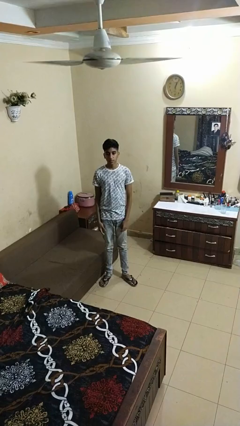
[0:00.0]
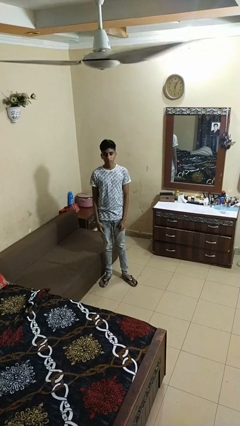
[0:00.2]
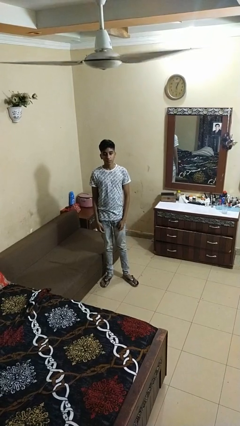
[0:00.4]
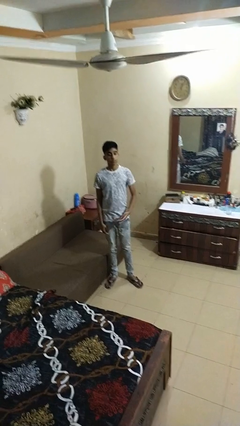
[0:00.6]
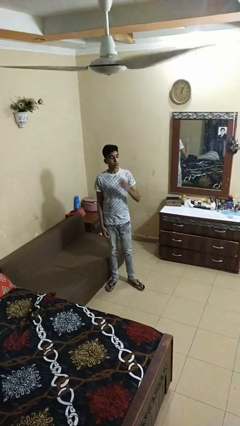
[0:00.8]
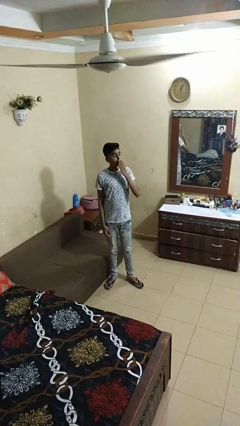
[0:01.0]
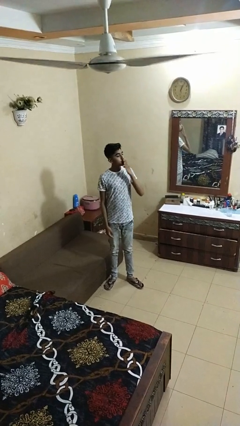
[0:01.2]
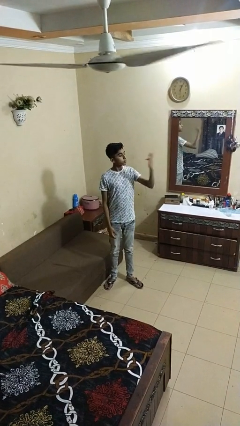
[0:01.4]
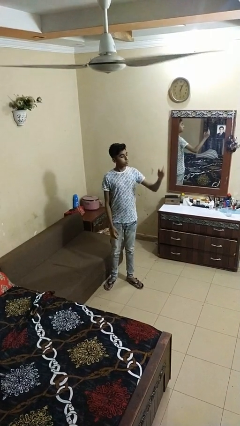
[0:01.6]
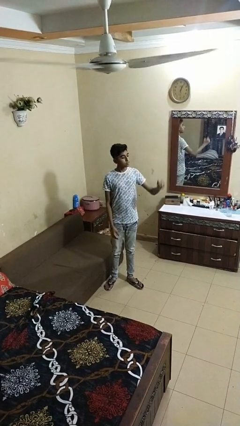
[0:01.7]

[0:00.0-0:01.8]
person gestures blow kiss

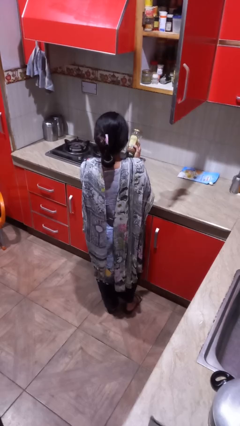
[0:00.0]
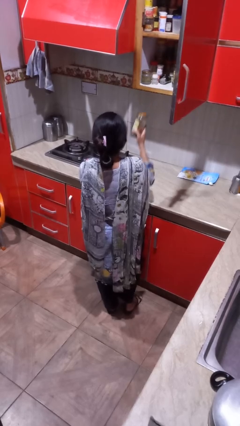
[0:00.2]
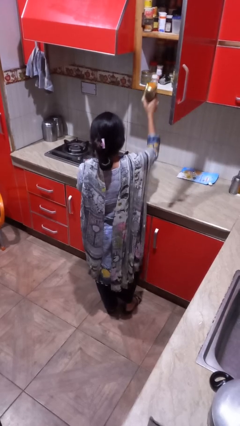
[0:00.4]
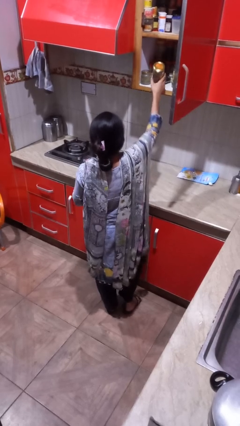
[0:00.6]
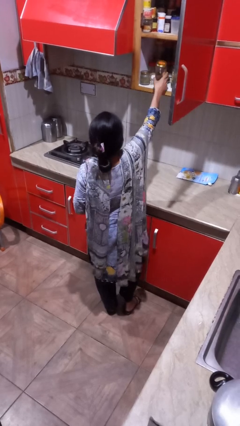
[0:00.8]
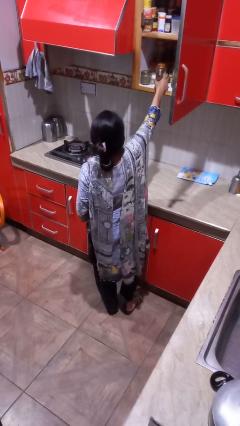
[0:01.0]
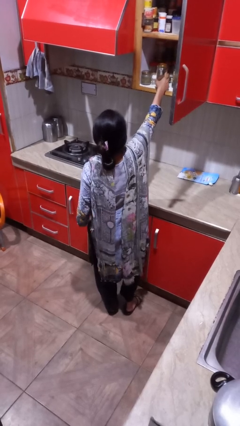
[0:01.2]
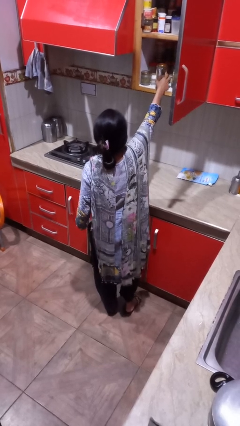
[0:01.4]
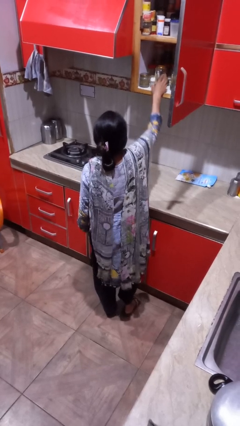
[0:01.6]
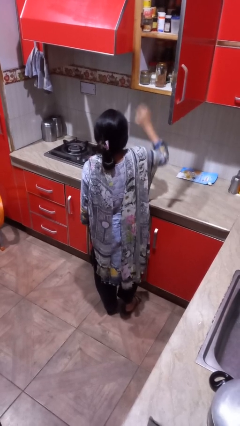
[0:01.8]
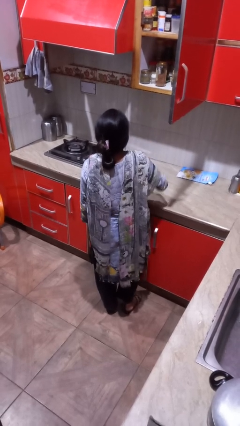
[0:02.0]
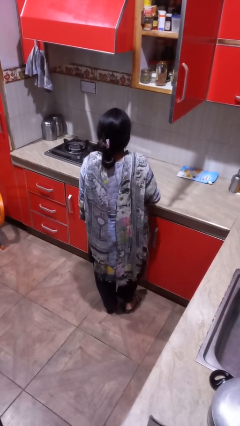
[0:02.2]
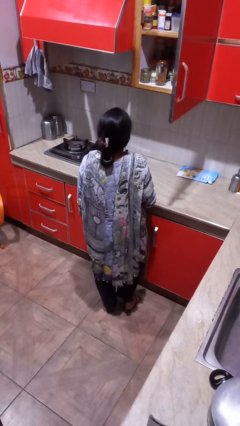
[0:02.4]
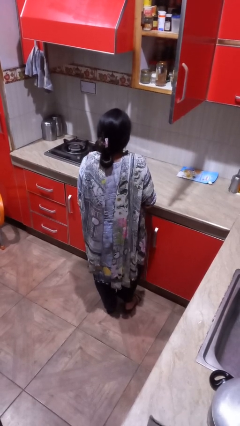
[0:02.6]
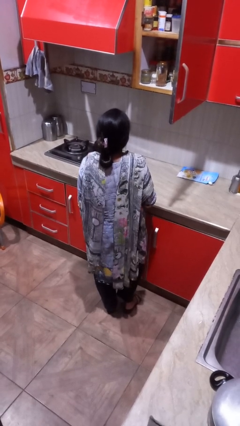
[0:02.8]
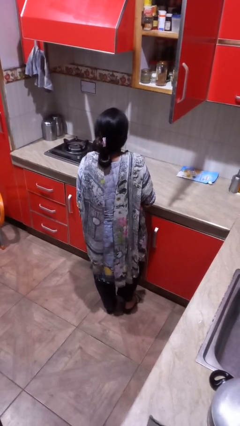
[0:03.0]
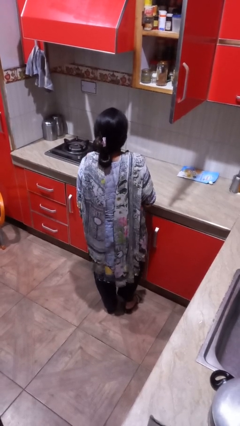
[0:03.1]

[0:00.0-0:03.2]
person puts object in cabinet

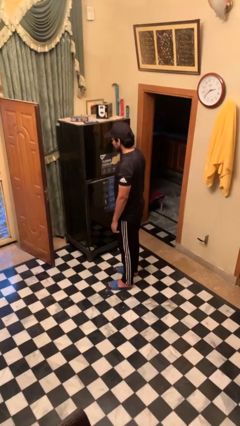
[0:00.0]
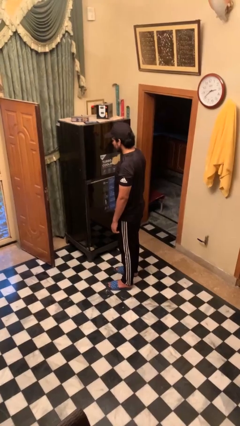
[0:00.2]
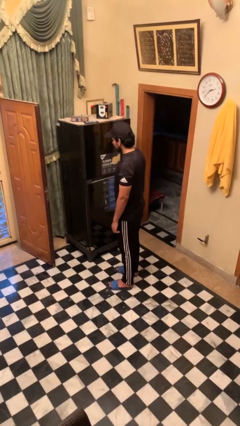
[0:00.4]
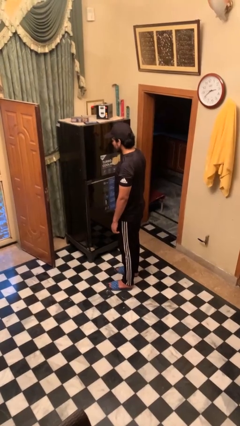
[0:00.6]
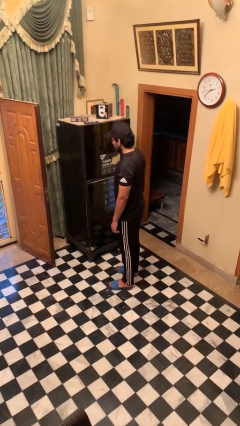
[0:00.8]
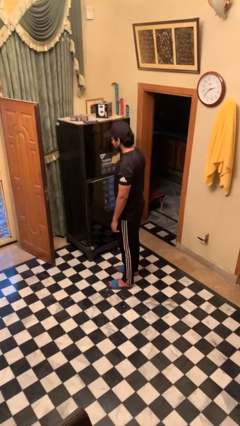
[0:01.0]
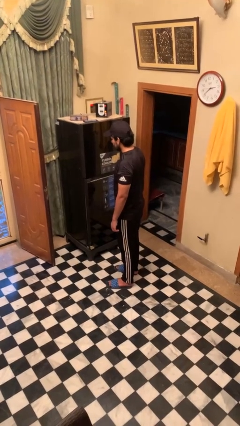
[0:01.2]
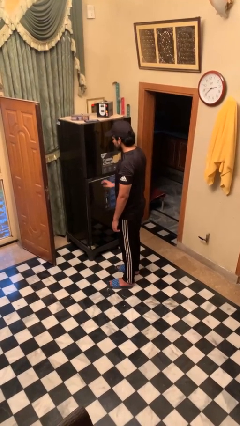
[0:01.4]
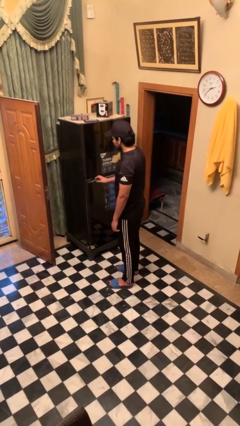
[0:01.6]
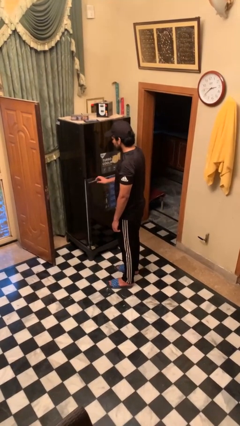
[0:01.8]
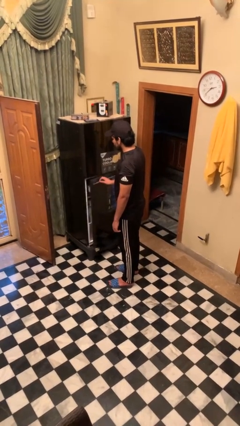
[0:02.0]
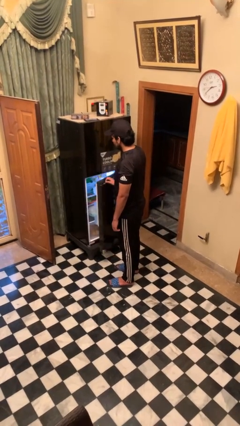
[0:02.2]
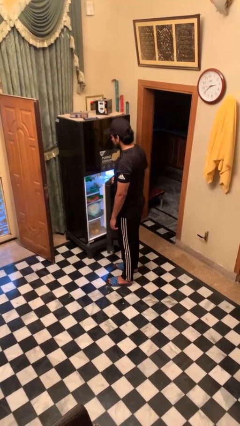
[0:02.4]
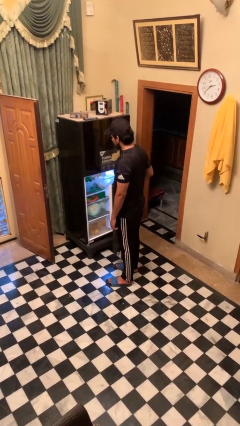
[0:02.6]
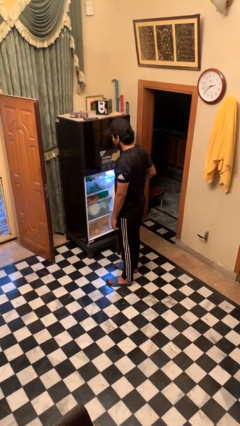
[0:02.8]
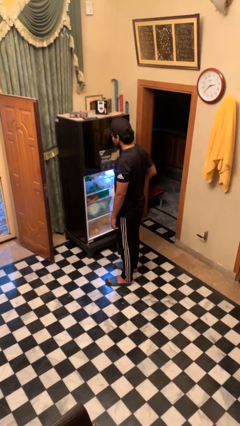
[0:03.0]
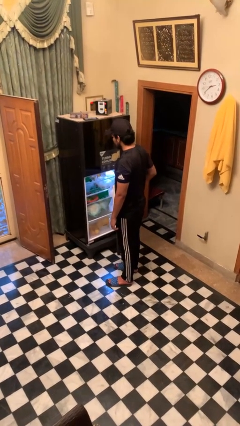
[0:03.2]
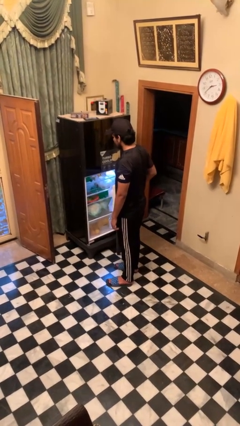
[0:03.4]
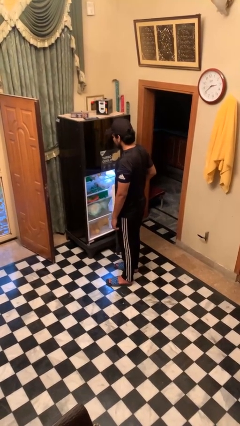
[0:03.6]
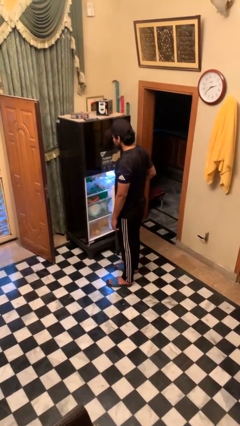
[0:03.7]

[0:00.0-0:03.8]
person opens refrigerator

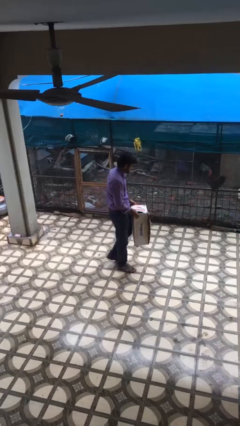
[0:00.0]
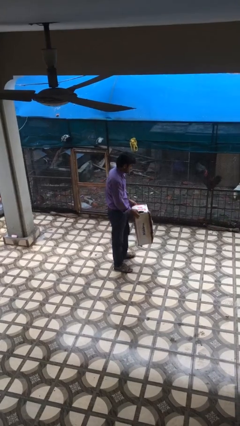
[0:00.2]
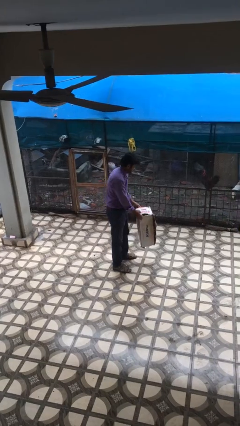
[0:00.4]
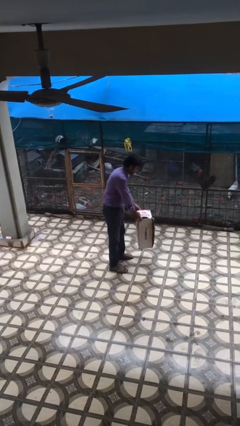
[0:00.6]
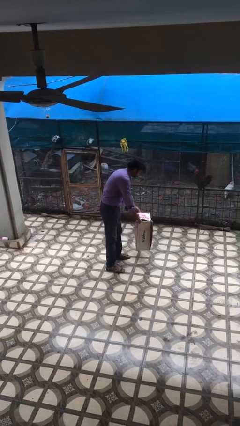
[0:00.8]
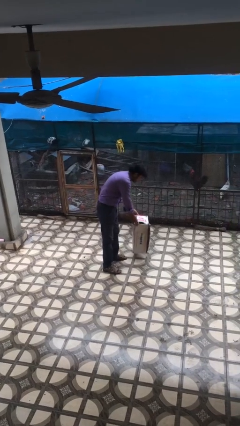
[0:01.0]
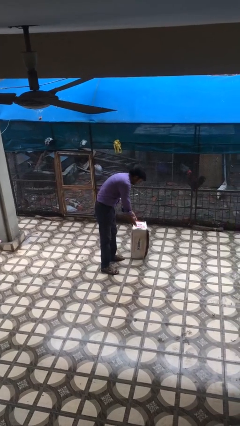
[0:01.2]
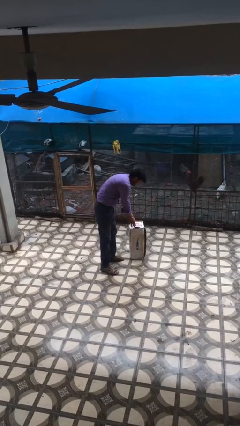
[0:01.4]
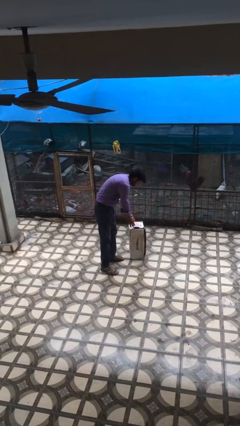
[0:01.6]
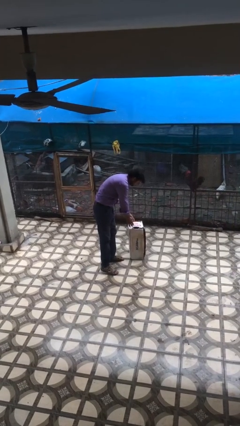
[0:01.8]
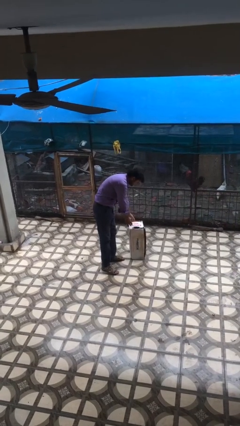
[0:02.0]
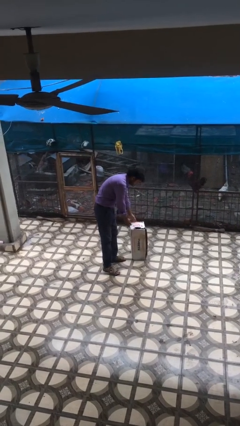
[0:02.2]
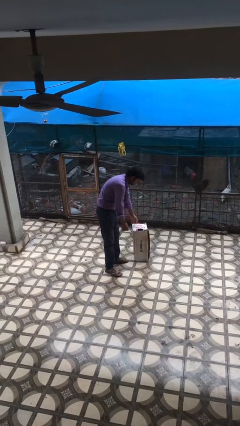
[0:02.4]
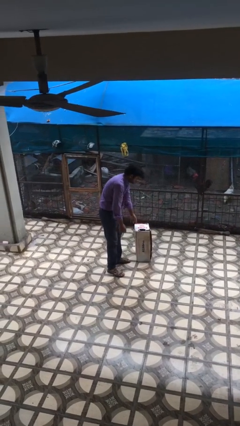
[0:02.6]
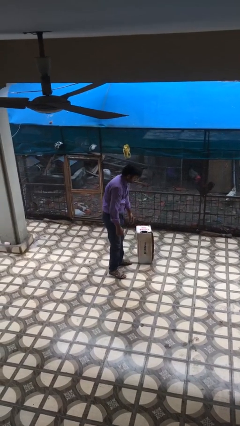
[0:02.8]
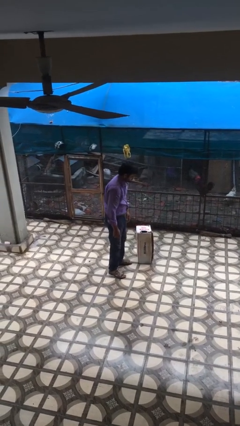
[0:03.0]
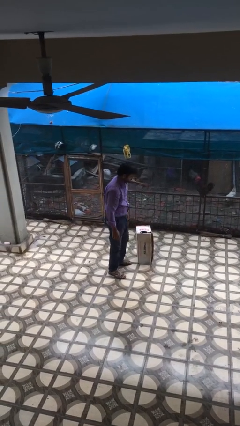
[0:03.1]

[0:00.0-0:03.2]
person puts down object on floor

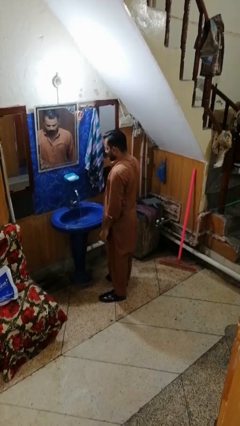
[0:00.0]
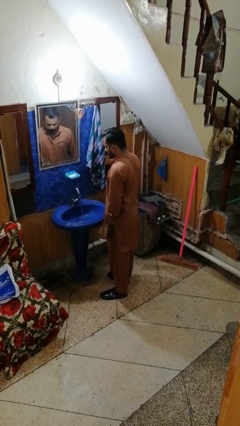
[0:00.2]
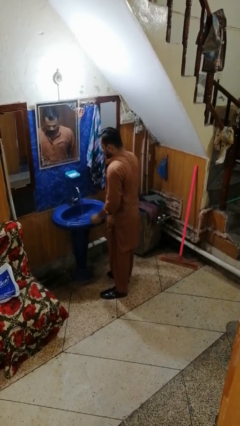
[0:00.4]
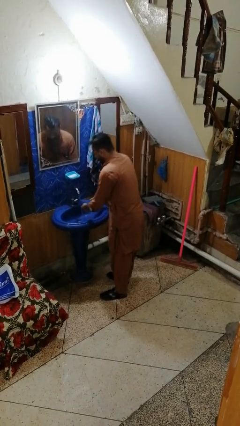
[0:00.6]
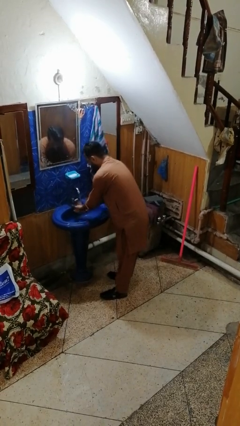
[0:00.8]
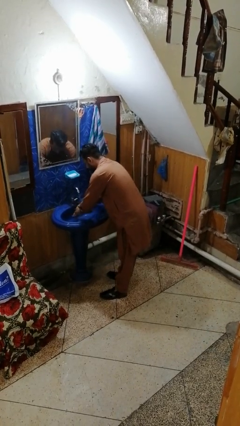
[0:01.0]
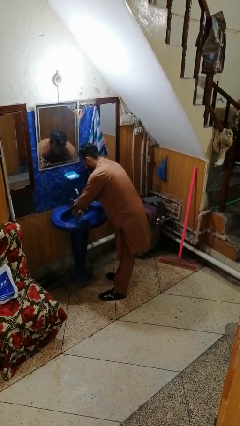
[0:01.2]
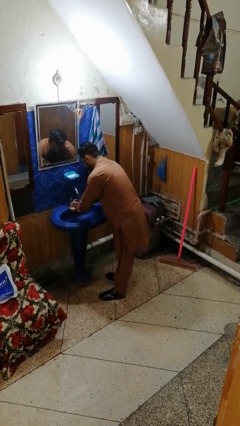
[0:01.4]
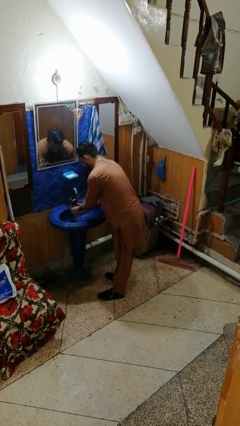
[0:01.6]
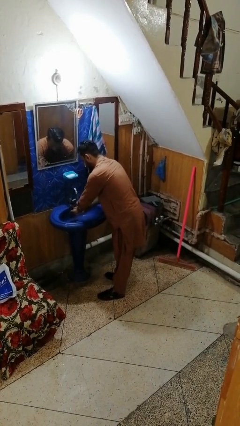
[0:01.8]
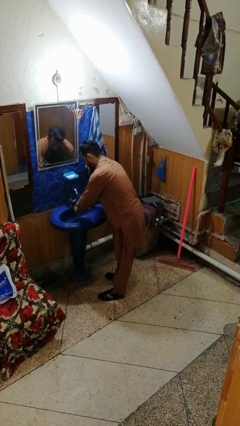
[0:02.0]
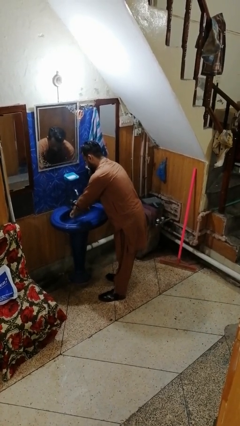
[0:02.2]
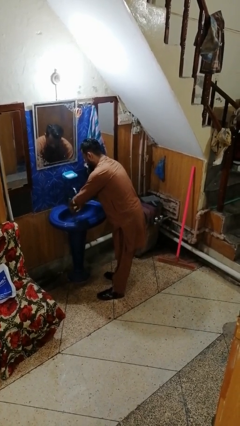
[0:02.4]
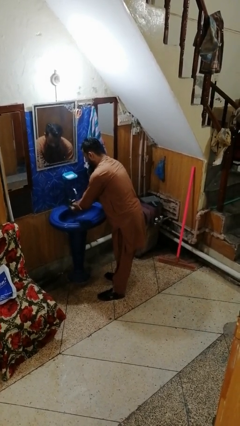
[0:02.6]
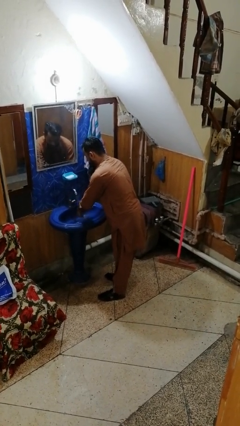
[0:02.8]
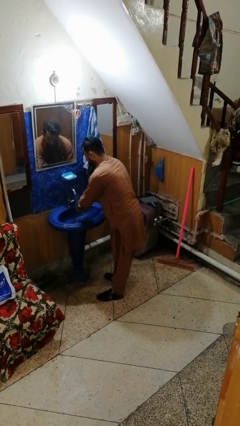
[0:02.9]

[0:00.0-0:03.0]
person washes hands

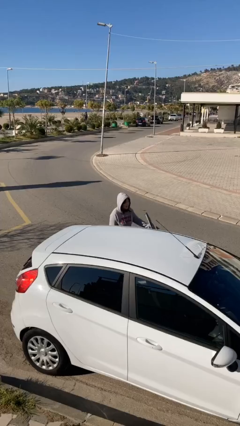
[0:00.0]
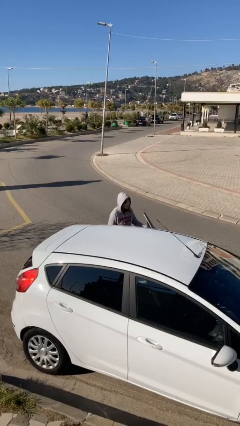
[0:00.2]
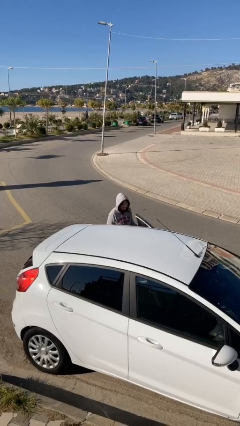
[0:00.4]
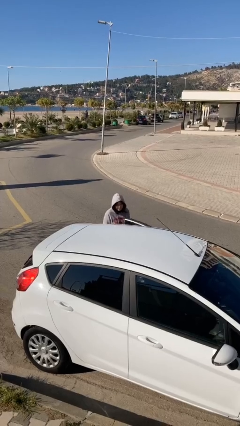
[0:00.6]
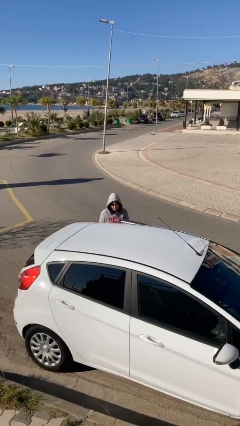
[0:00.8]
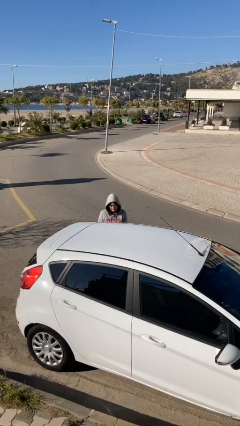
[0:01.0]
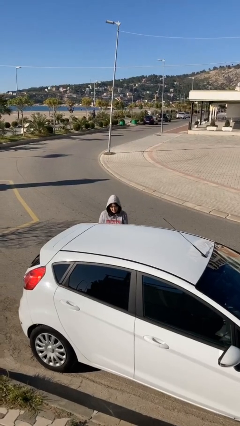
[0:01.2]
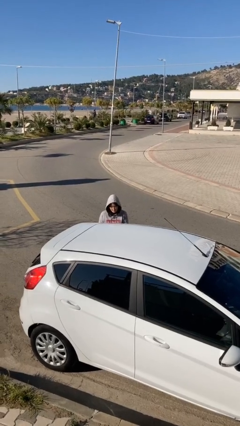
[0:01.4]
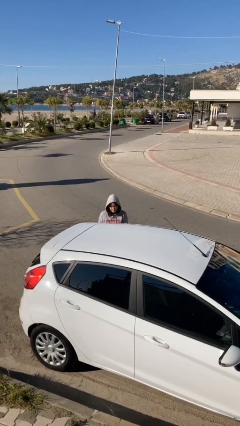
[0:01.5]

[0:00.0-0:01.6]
person closes car door

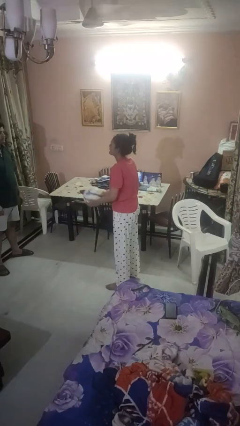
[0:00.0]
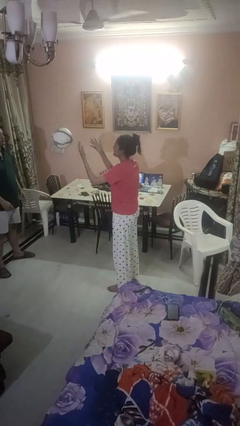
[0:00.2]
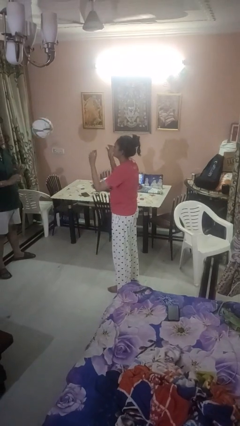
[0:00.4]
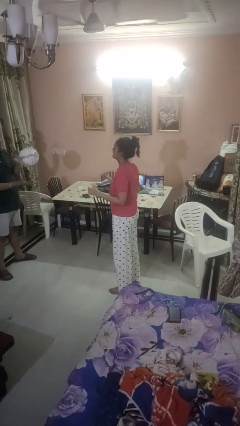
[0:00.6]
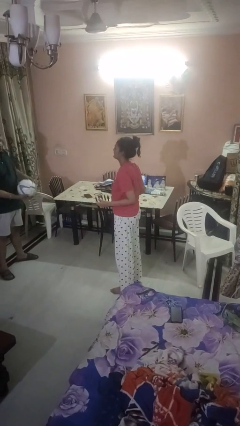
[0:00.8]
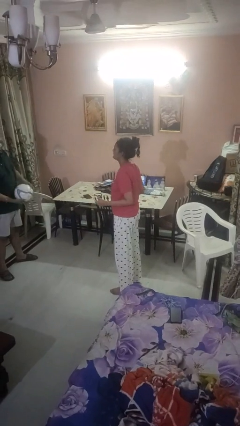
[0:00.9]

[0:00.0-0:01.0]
person throws object to person
